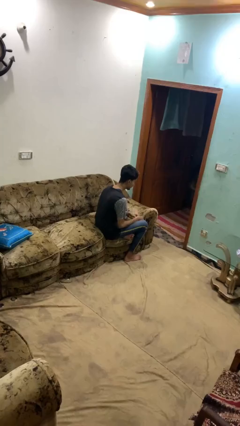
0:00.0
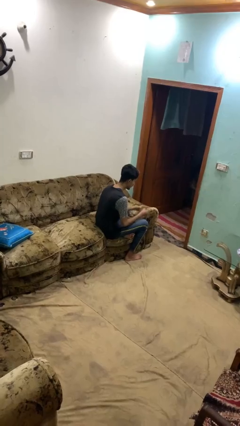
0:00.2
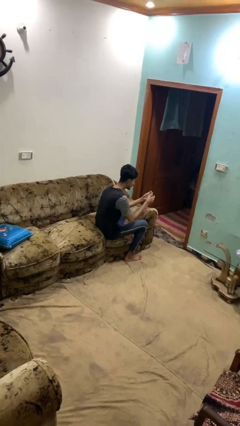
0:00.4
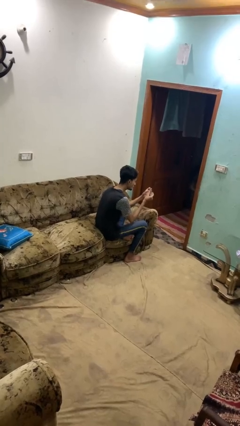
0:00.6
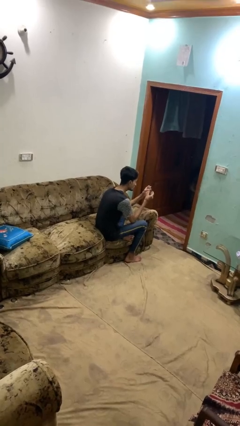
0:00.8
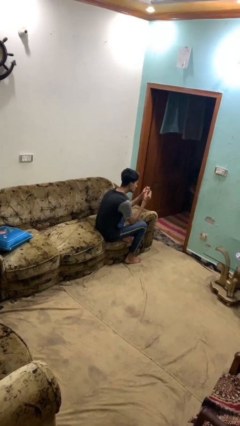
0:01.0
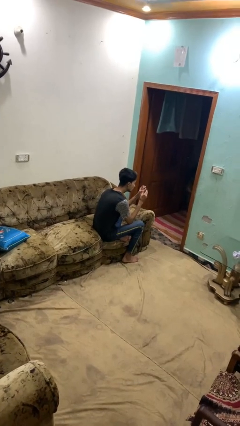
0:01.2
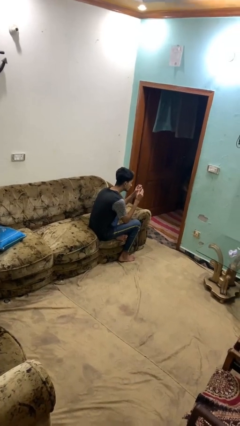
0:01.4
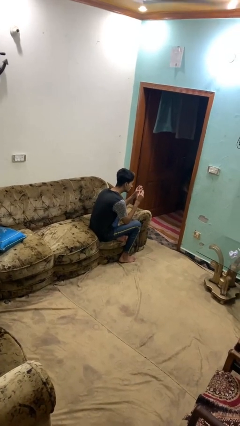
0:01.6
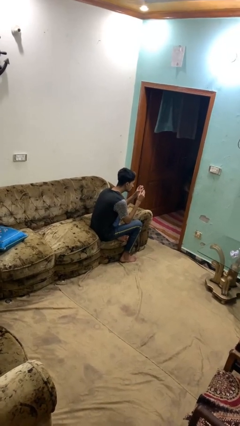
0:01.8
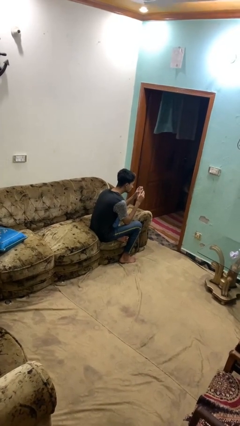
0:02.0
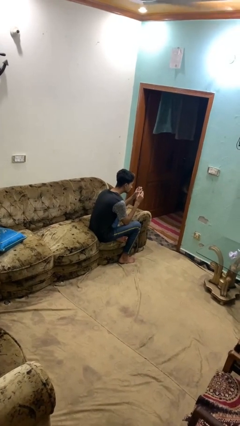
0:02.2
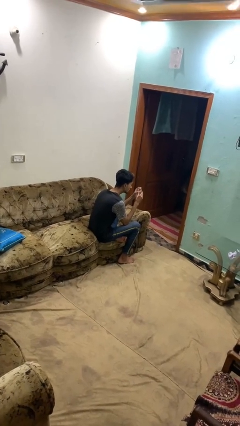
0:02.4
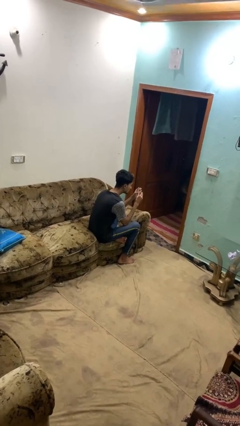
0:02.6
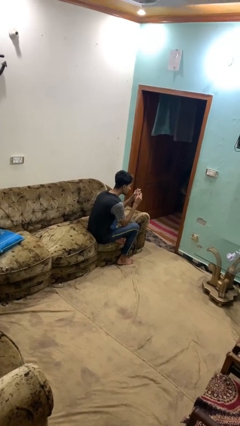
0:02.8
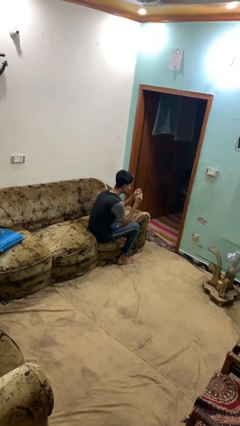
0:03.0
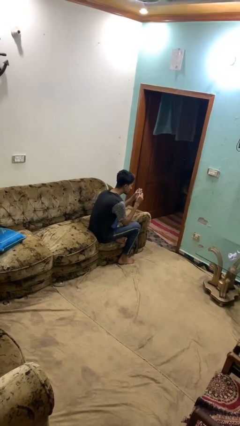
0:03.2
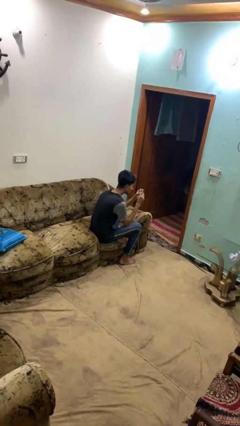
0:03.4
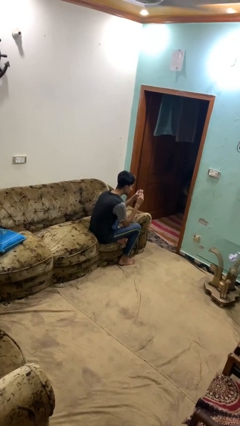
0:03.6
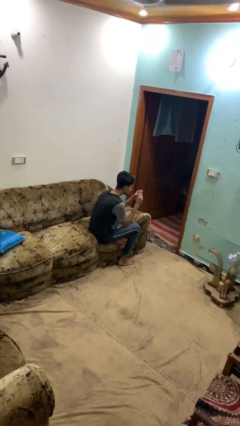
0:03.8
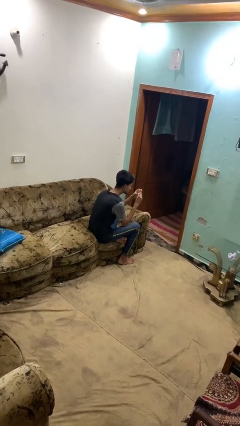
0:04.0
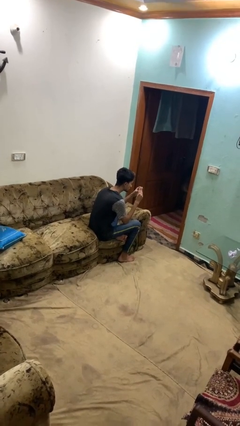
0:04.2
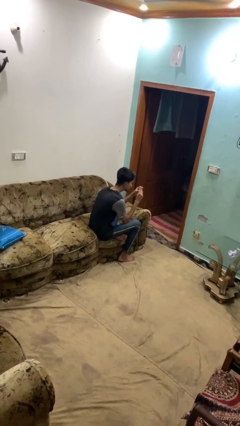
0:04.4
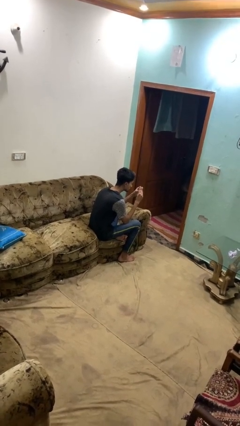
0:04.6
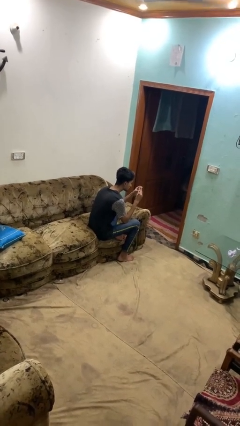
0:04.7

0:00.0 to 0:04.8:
person clips fingernails

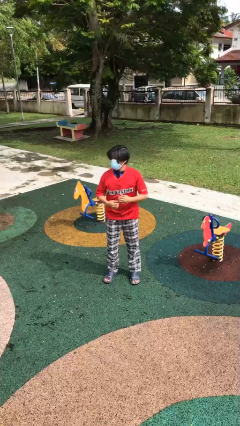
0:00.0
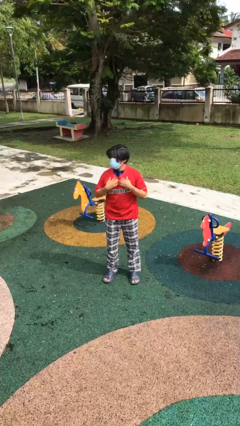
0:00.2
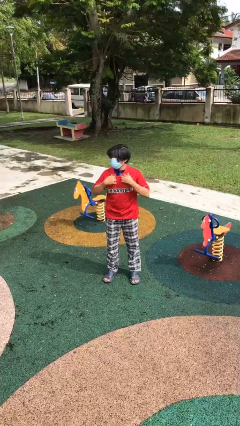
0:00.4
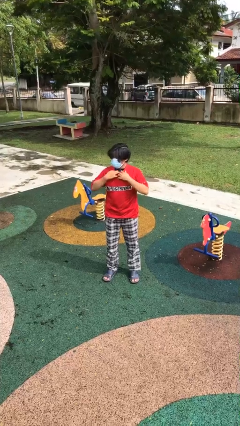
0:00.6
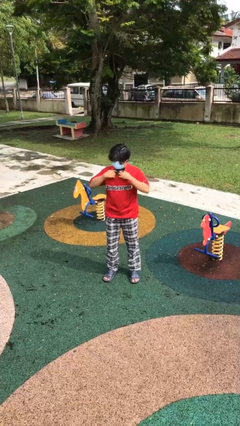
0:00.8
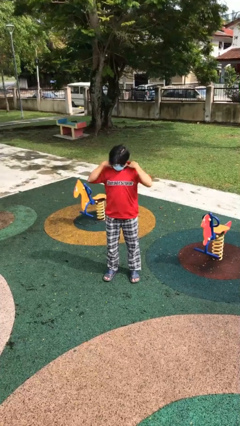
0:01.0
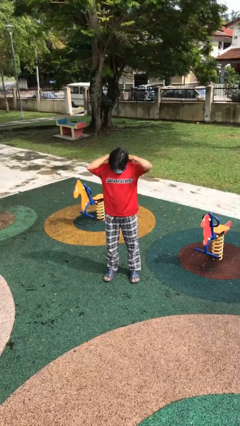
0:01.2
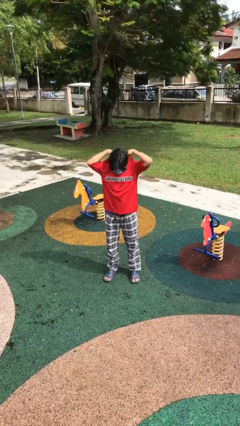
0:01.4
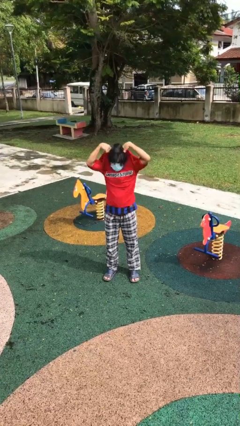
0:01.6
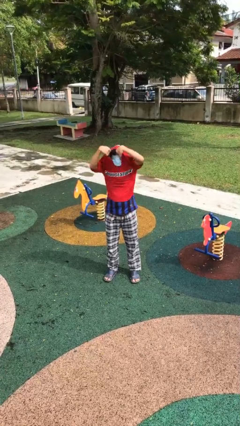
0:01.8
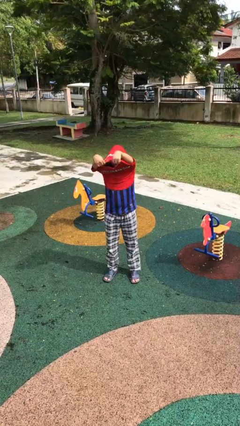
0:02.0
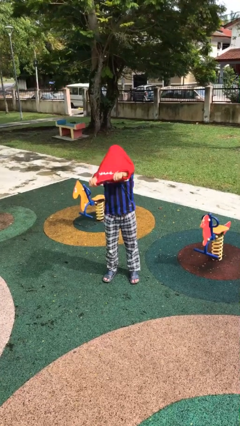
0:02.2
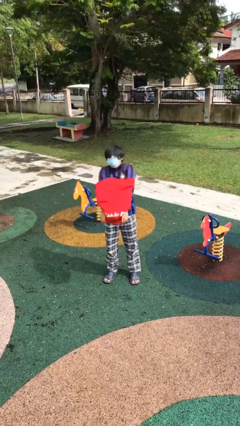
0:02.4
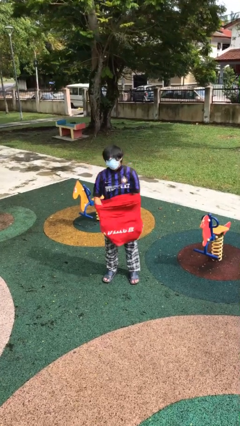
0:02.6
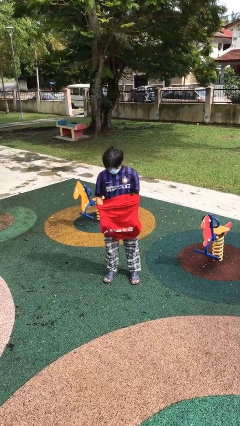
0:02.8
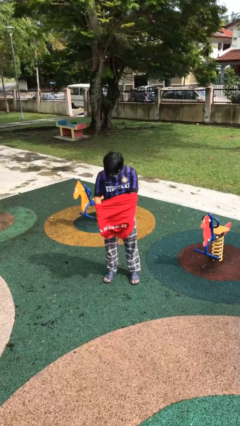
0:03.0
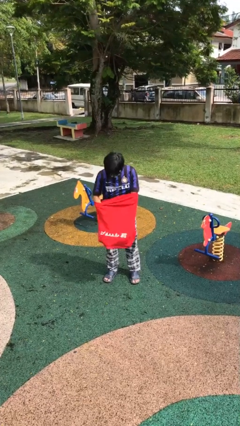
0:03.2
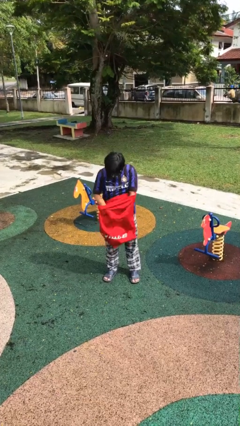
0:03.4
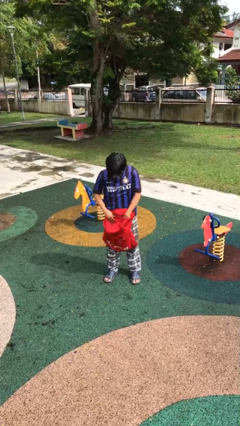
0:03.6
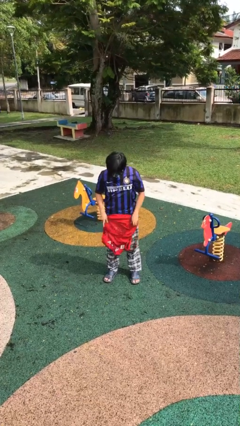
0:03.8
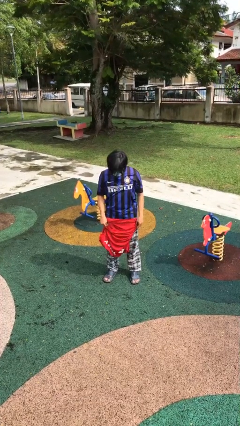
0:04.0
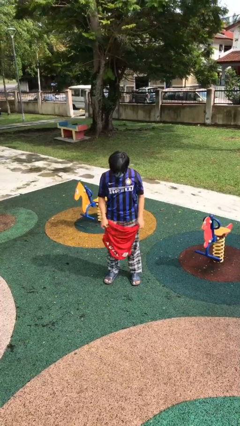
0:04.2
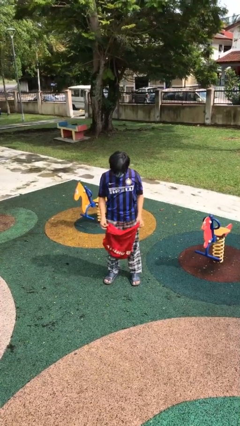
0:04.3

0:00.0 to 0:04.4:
person takes off shirt

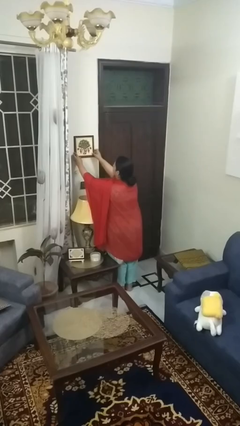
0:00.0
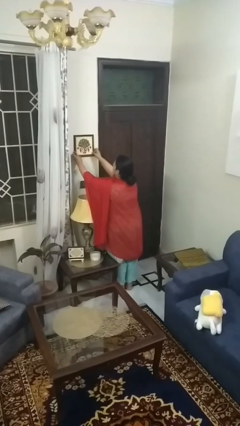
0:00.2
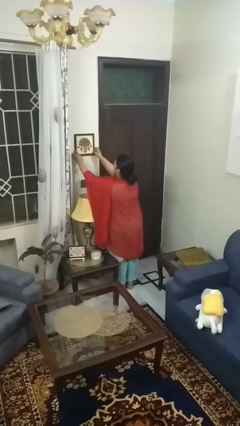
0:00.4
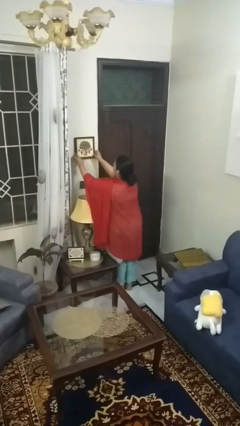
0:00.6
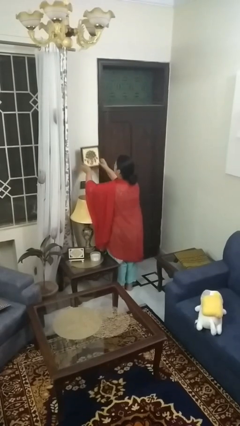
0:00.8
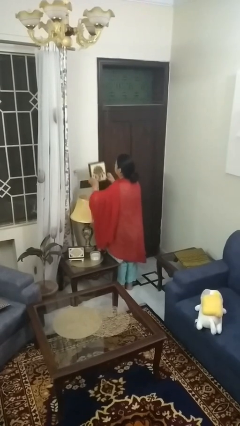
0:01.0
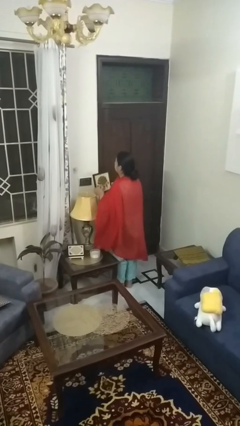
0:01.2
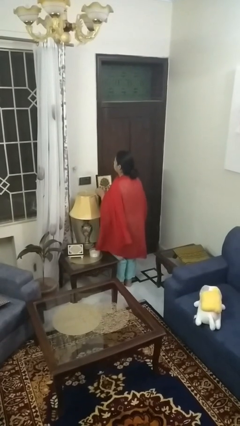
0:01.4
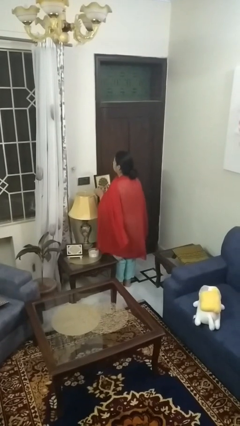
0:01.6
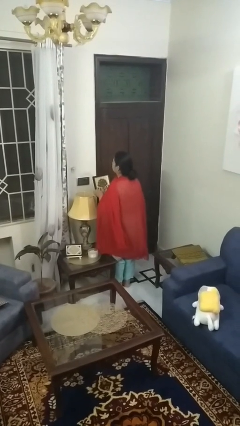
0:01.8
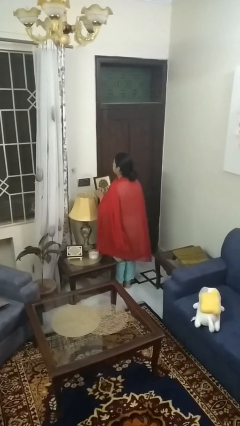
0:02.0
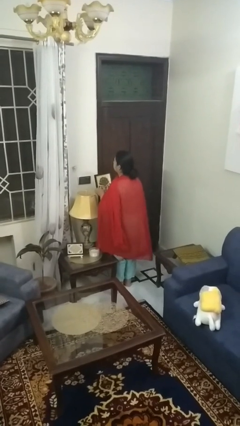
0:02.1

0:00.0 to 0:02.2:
person takes down picture frame

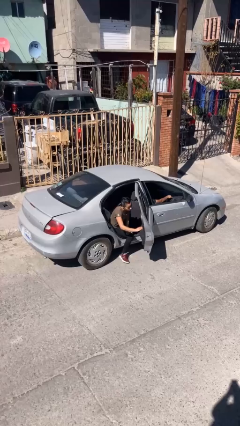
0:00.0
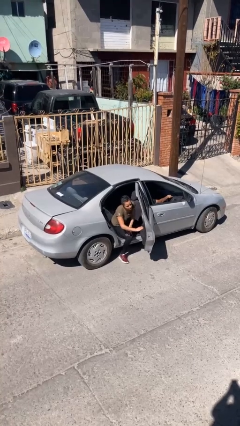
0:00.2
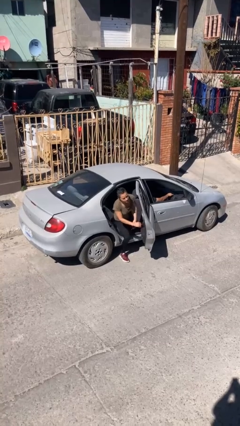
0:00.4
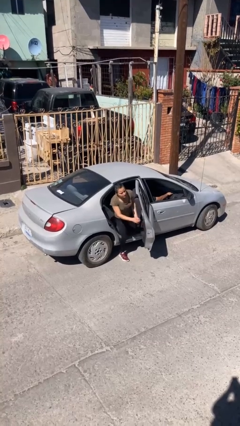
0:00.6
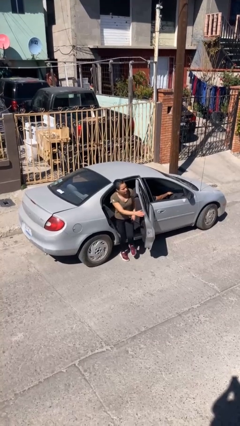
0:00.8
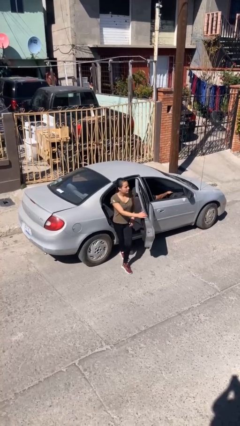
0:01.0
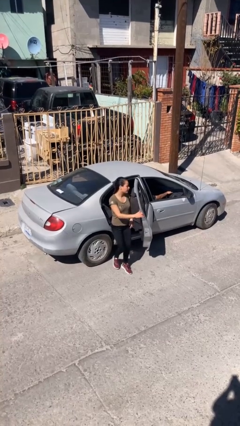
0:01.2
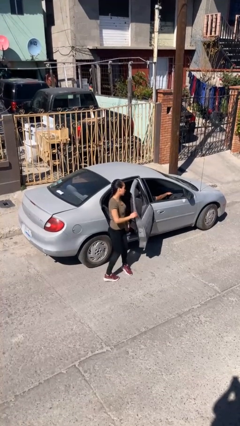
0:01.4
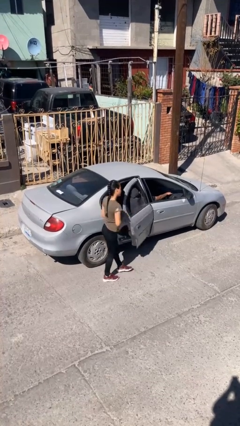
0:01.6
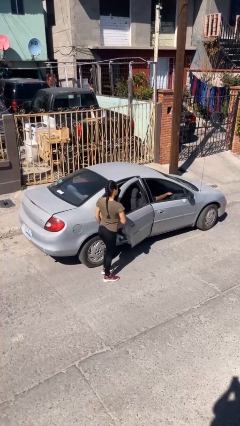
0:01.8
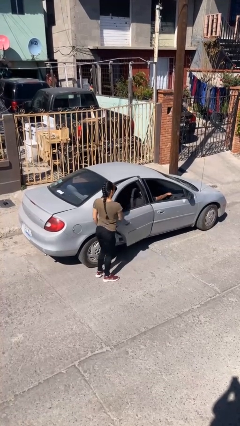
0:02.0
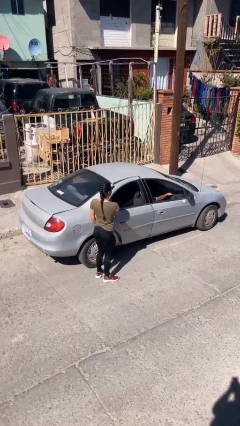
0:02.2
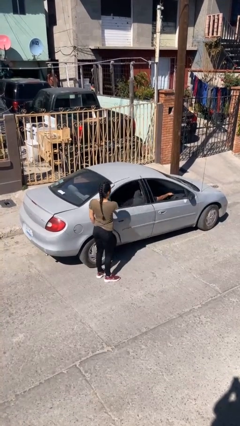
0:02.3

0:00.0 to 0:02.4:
car drops off person

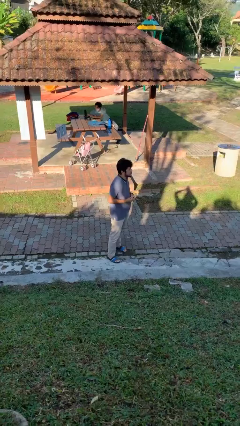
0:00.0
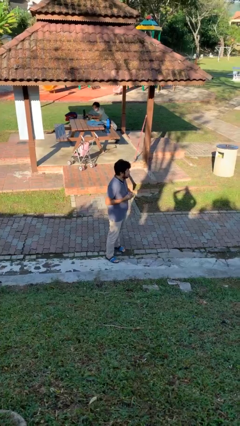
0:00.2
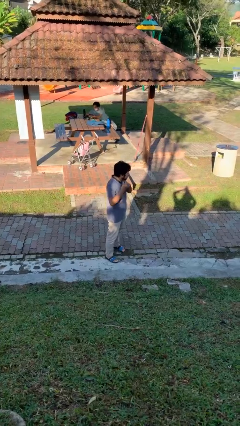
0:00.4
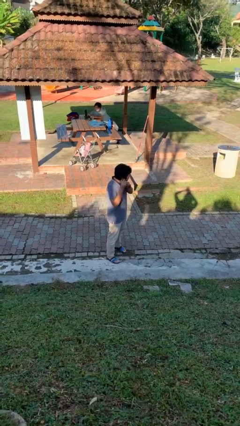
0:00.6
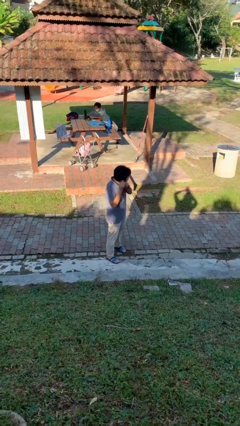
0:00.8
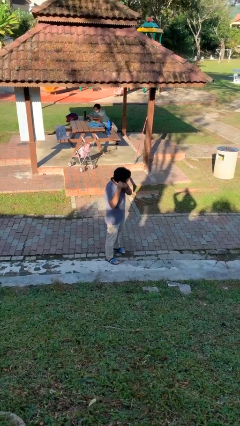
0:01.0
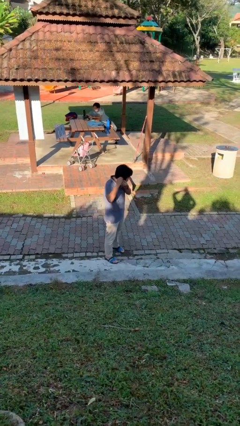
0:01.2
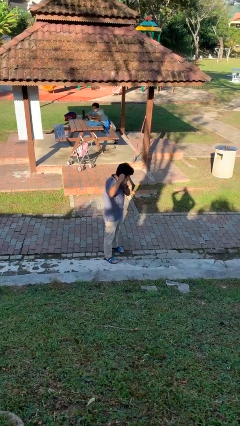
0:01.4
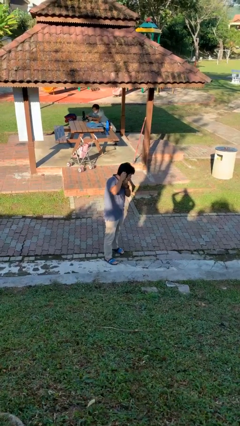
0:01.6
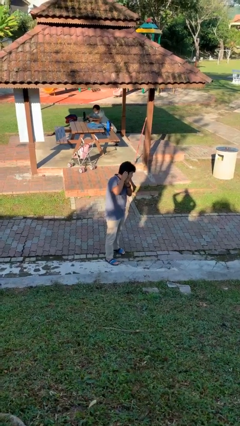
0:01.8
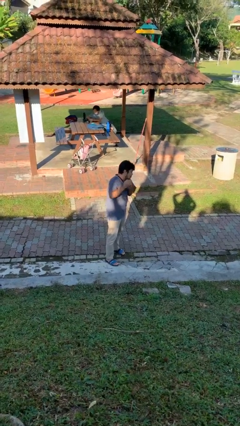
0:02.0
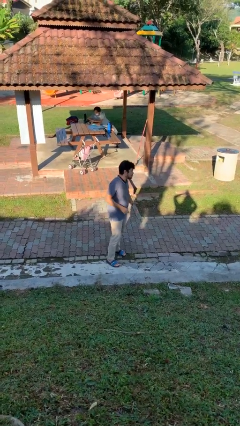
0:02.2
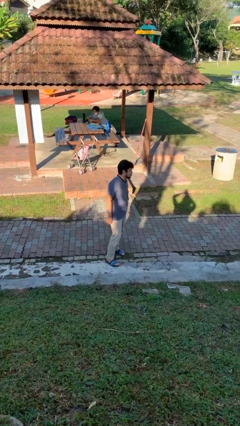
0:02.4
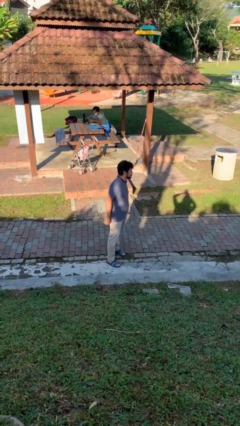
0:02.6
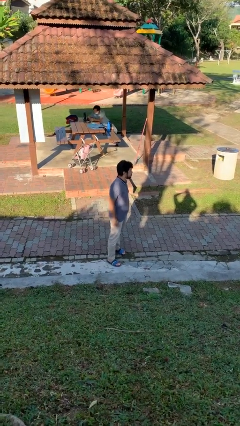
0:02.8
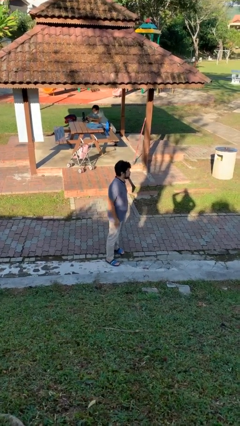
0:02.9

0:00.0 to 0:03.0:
person puts on earrings

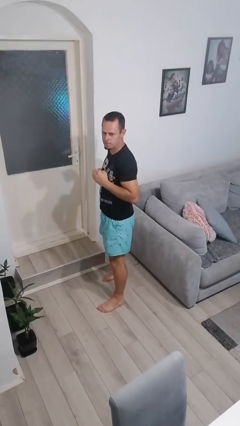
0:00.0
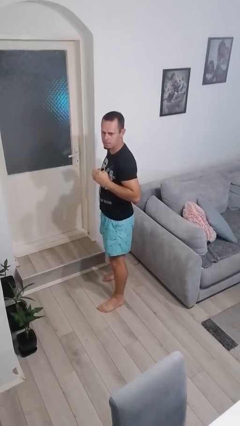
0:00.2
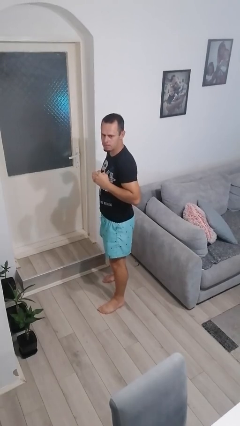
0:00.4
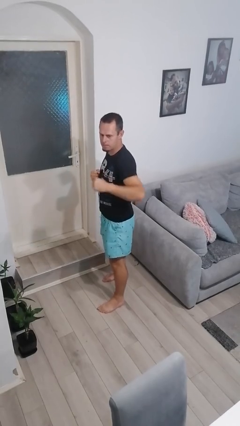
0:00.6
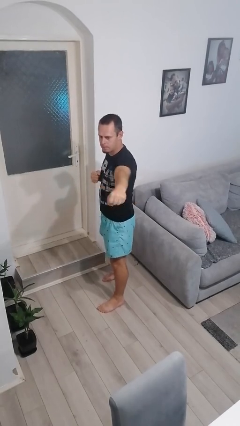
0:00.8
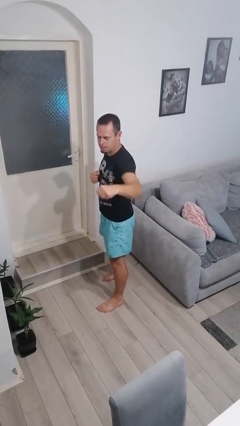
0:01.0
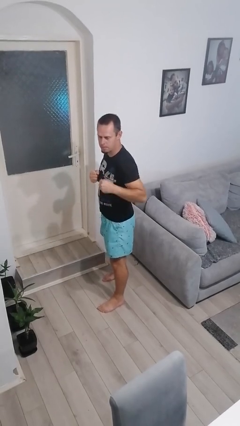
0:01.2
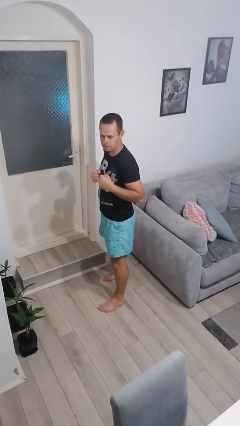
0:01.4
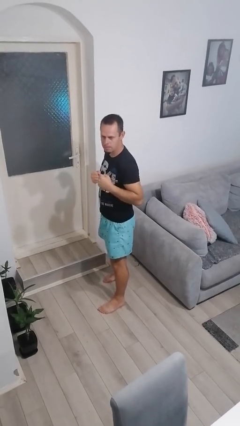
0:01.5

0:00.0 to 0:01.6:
person karate chop
